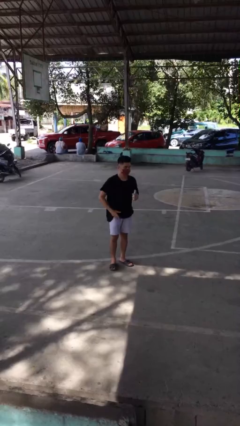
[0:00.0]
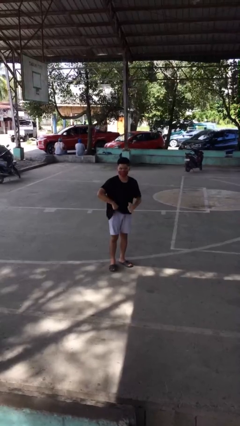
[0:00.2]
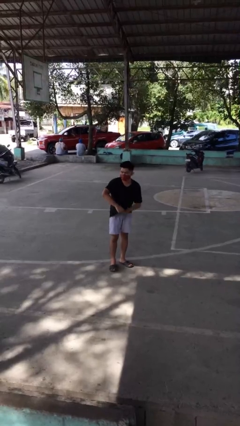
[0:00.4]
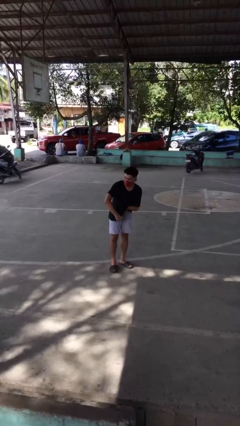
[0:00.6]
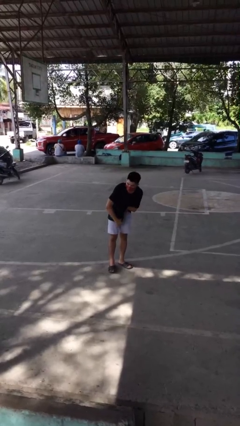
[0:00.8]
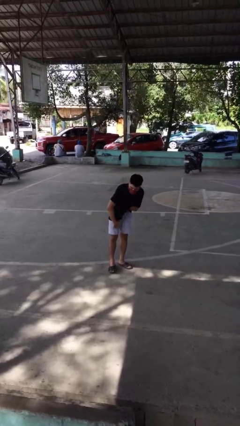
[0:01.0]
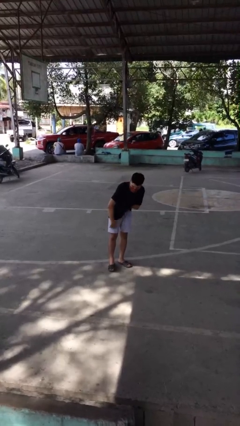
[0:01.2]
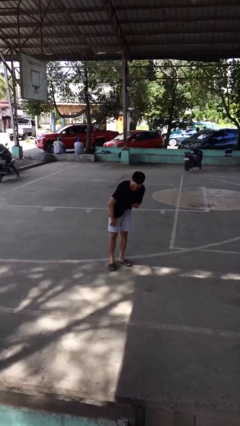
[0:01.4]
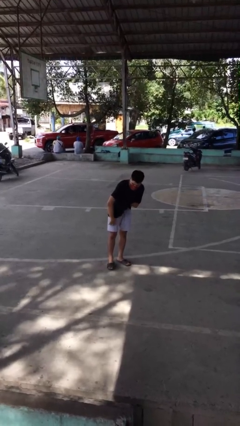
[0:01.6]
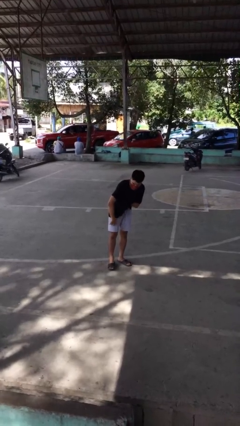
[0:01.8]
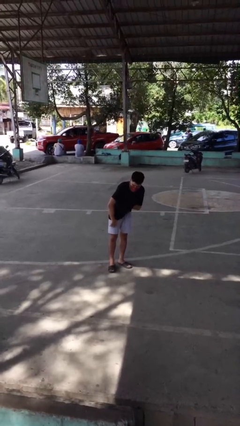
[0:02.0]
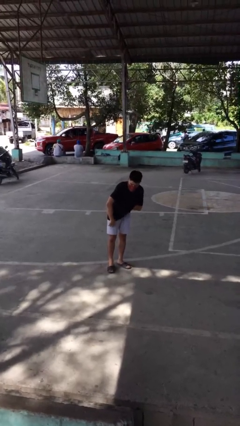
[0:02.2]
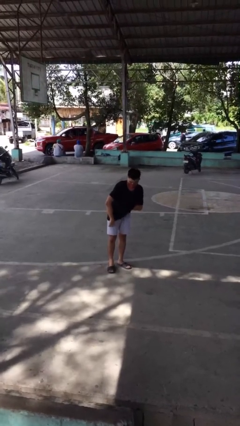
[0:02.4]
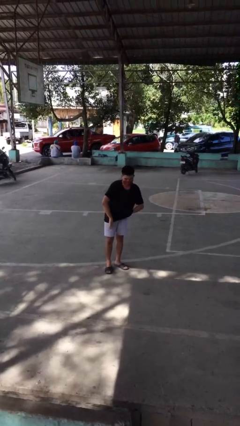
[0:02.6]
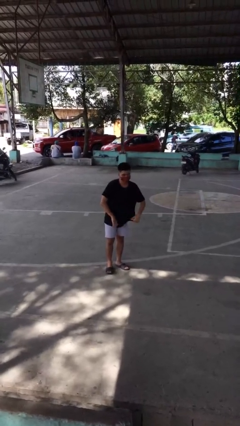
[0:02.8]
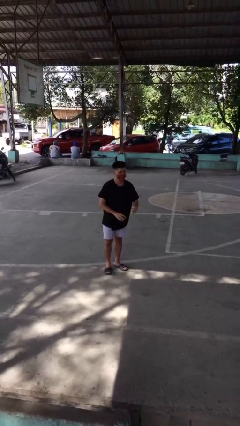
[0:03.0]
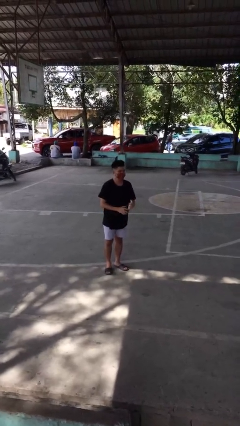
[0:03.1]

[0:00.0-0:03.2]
person applies deodorant

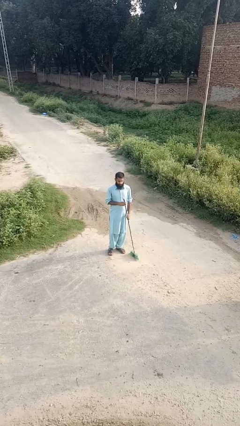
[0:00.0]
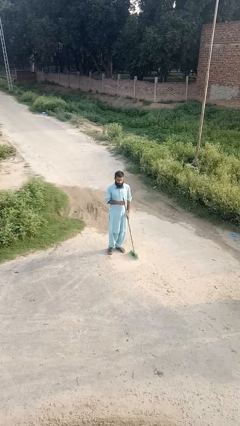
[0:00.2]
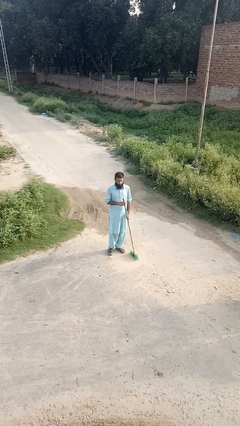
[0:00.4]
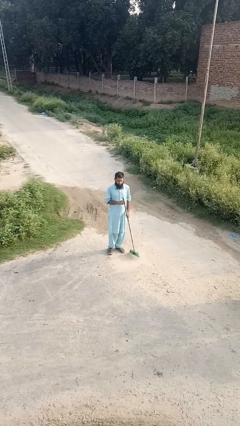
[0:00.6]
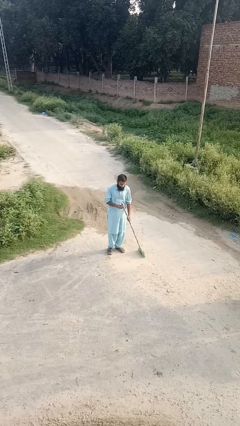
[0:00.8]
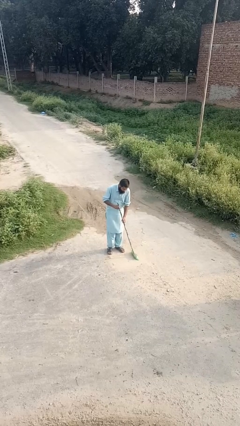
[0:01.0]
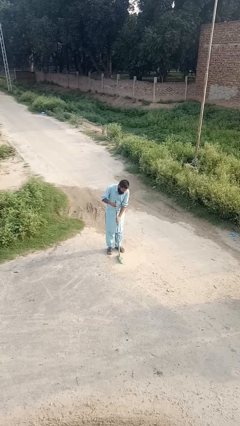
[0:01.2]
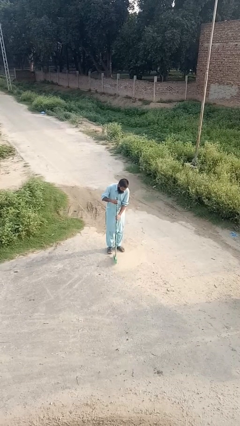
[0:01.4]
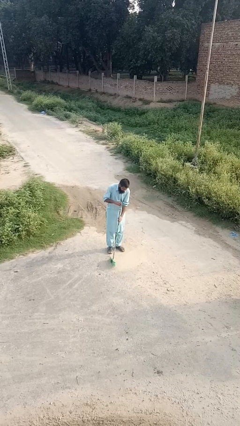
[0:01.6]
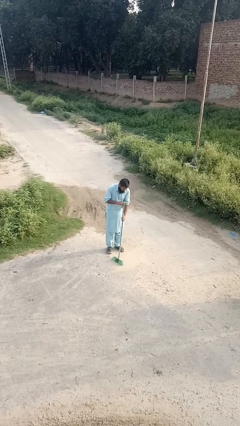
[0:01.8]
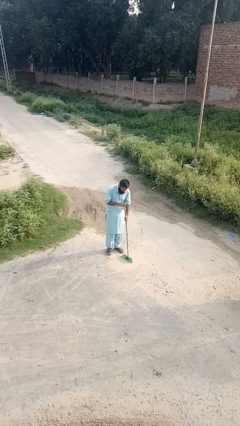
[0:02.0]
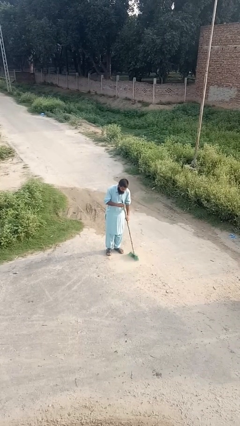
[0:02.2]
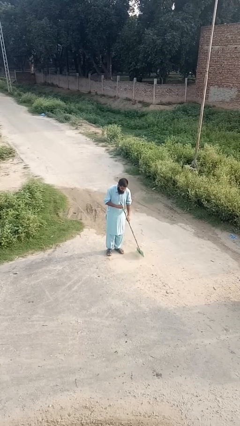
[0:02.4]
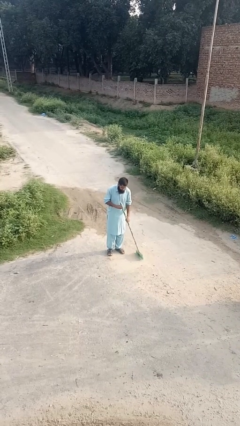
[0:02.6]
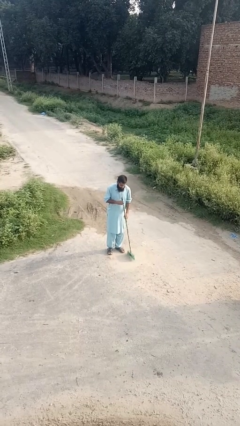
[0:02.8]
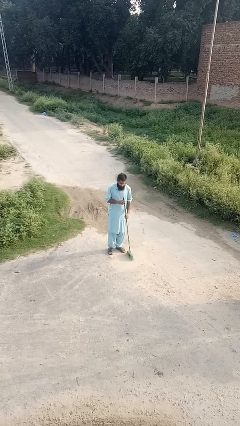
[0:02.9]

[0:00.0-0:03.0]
person sweeps floor

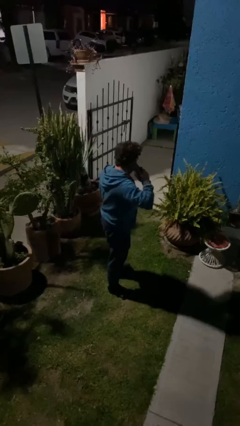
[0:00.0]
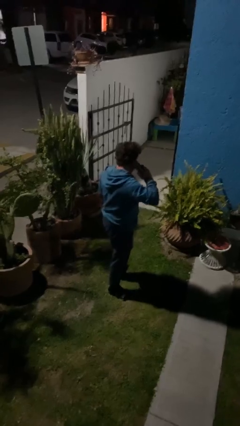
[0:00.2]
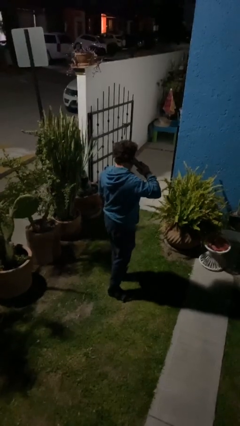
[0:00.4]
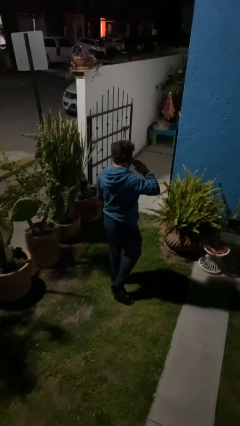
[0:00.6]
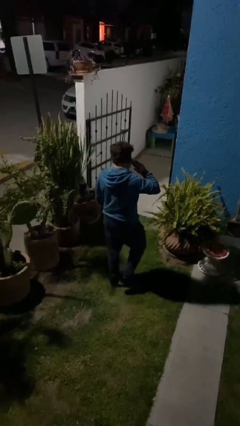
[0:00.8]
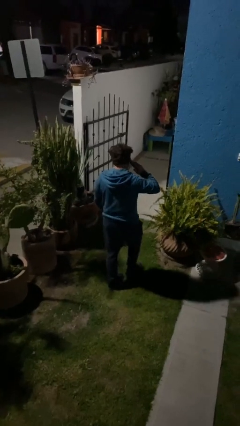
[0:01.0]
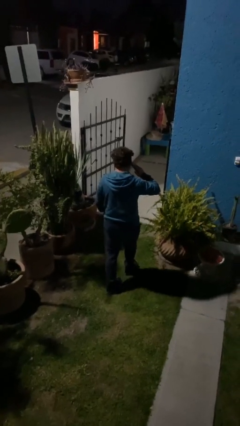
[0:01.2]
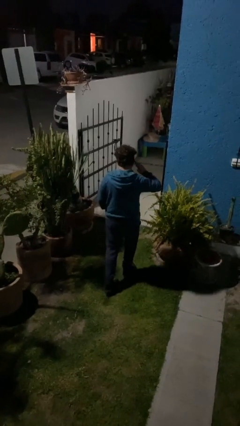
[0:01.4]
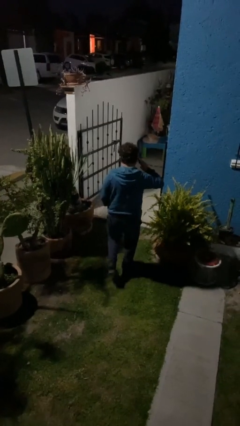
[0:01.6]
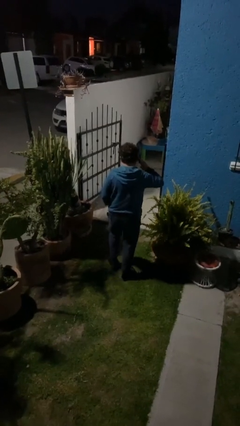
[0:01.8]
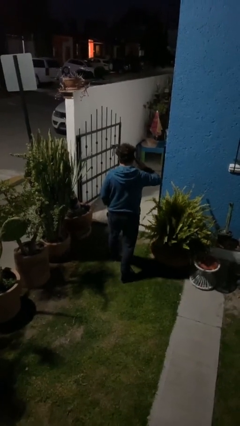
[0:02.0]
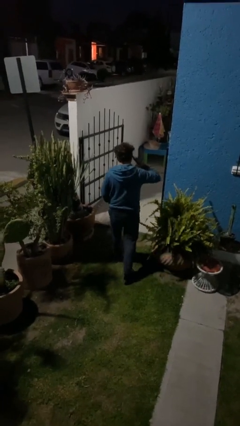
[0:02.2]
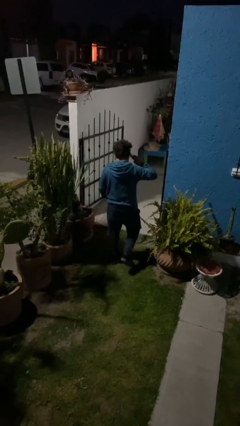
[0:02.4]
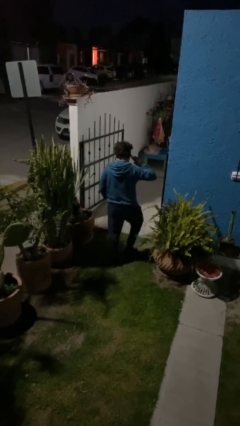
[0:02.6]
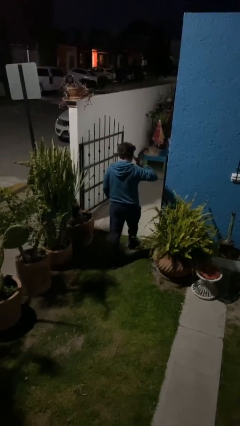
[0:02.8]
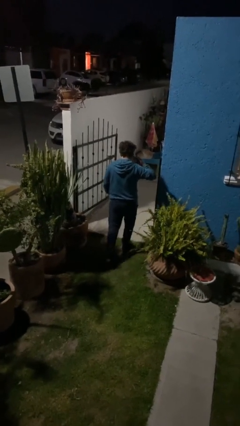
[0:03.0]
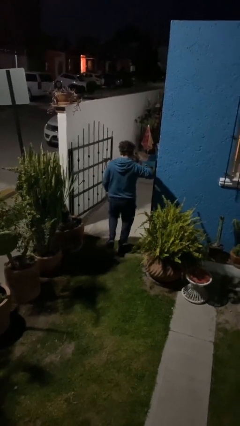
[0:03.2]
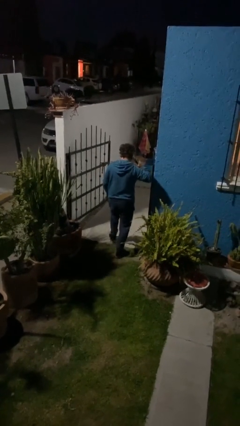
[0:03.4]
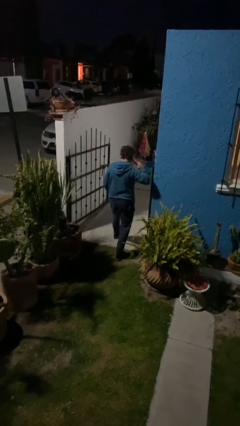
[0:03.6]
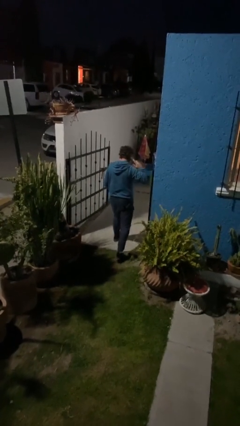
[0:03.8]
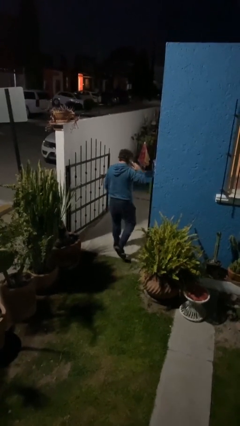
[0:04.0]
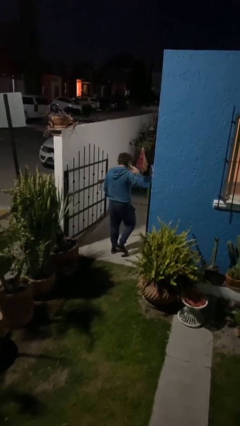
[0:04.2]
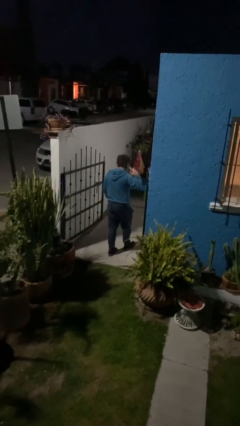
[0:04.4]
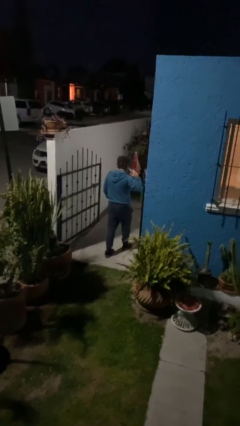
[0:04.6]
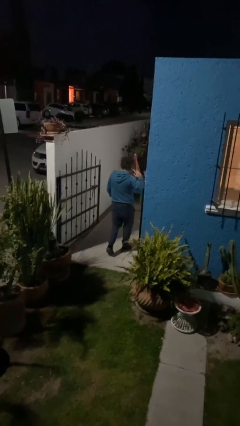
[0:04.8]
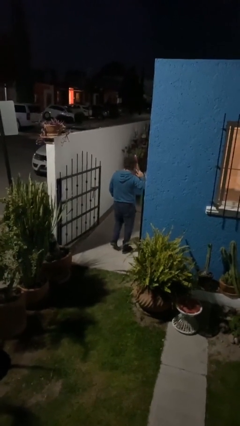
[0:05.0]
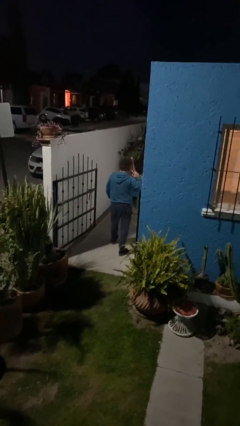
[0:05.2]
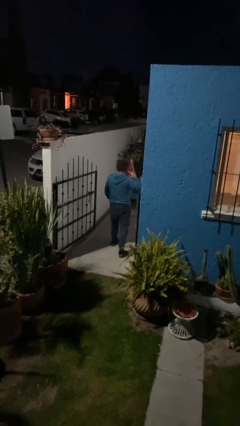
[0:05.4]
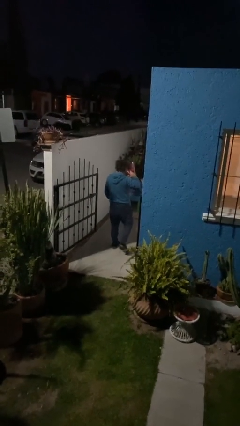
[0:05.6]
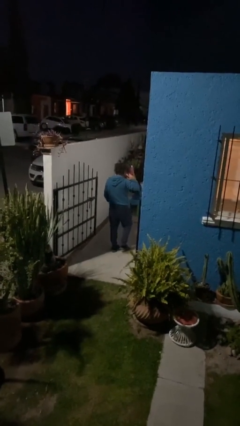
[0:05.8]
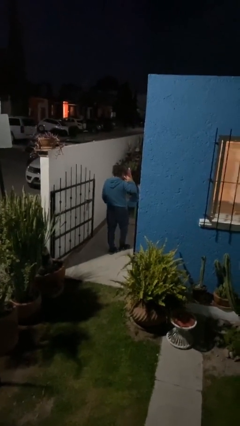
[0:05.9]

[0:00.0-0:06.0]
person exits scene through structure

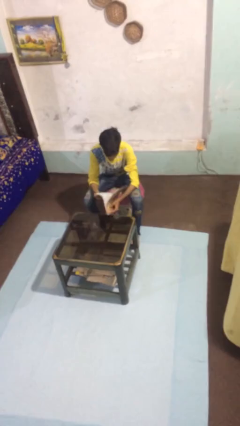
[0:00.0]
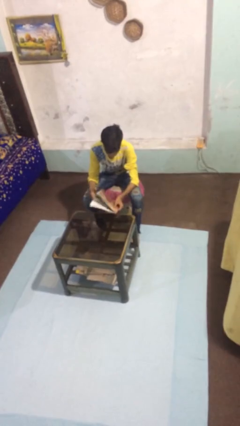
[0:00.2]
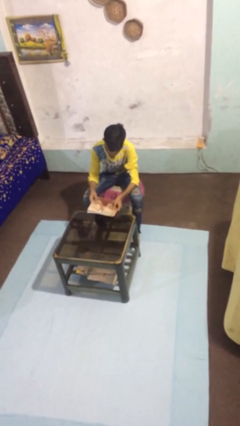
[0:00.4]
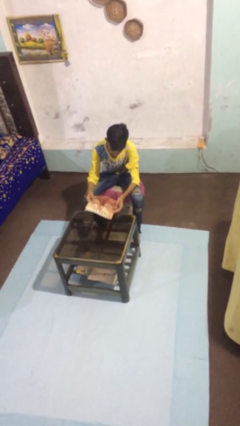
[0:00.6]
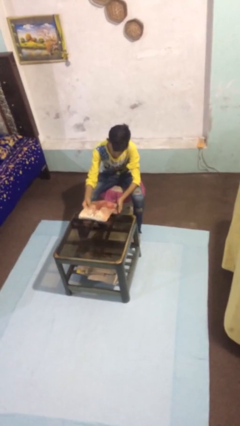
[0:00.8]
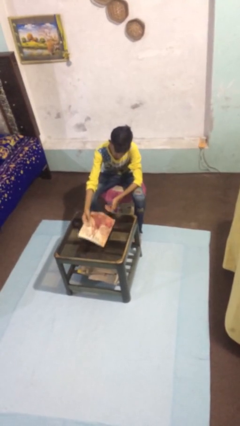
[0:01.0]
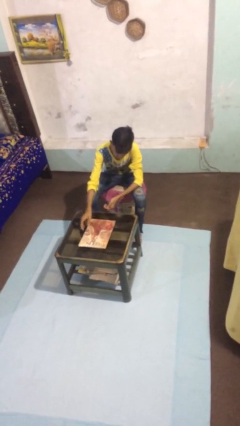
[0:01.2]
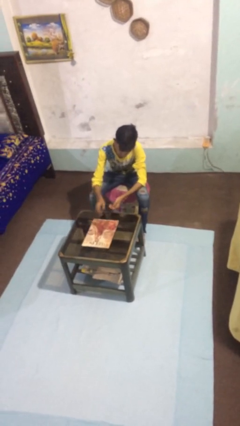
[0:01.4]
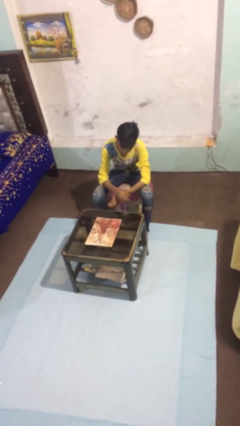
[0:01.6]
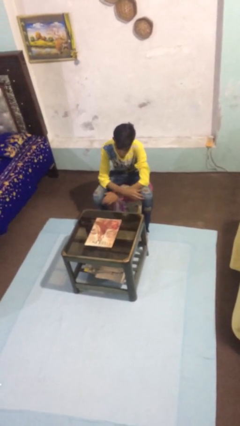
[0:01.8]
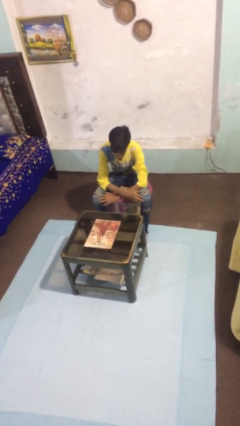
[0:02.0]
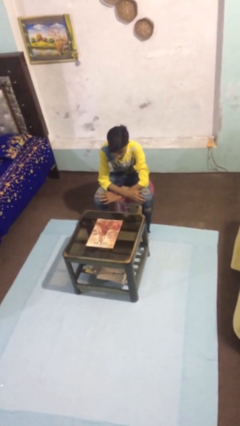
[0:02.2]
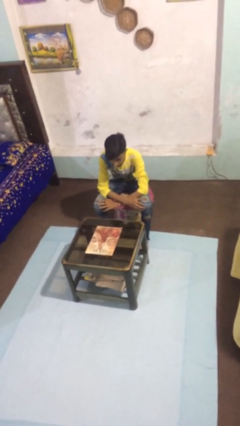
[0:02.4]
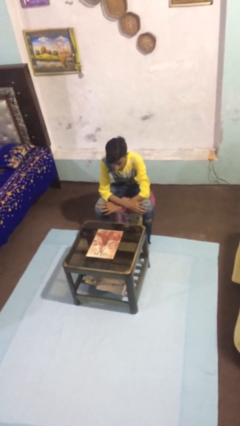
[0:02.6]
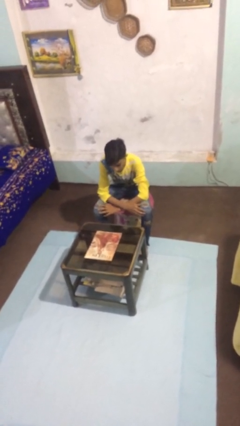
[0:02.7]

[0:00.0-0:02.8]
person puts down object on table

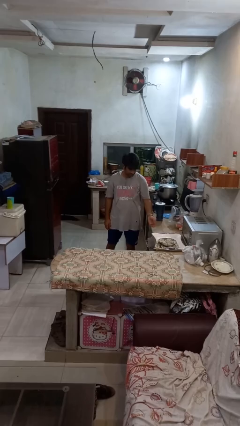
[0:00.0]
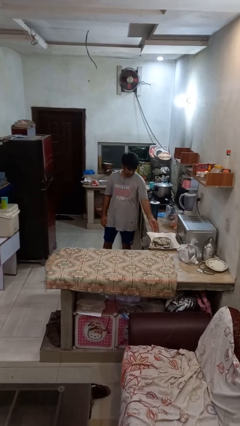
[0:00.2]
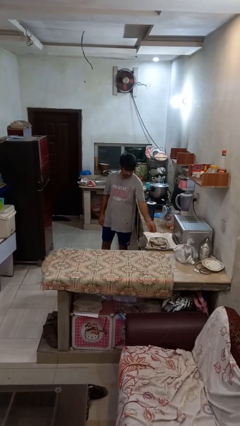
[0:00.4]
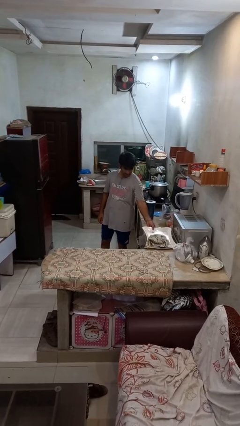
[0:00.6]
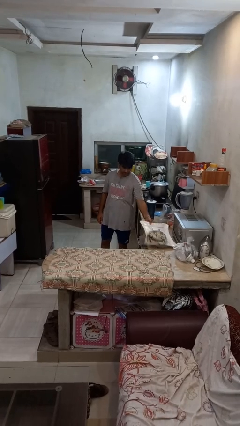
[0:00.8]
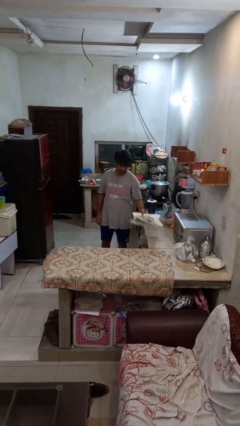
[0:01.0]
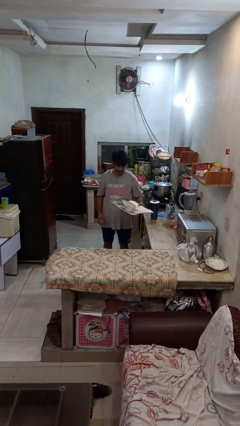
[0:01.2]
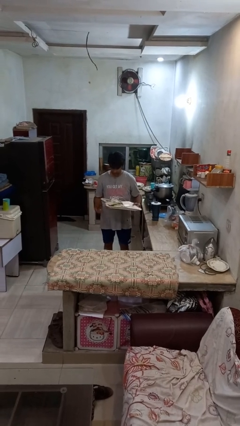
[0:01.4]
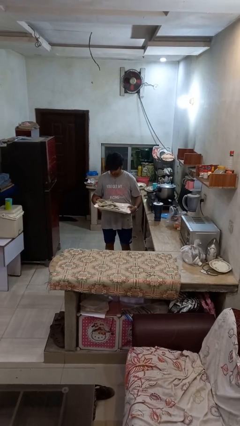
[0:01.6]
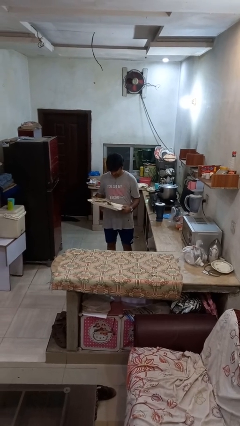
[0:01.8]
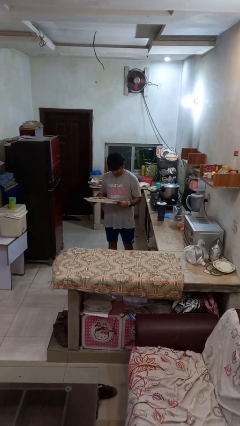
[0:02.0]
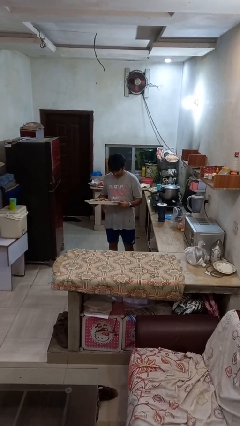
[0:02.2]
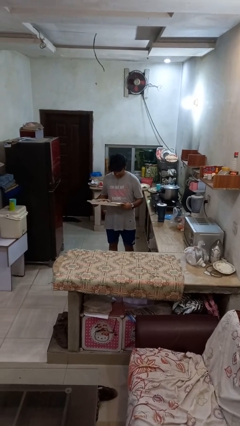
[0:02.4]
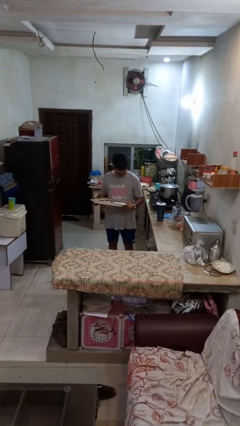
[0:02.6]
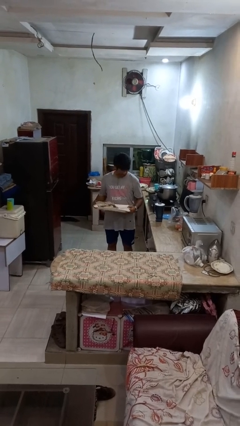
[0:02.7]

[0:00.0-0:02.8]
person picks up object from countertop

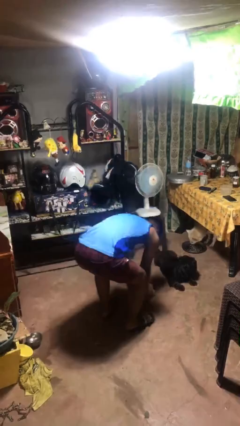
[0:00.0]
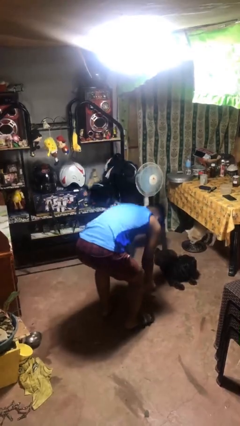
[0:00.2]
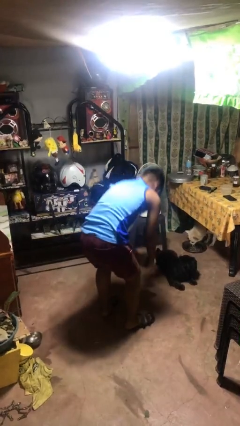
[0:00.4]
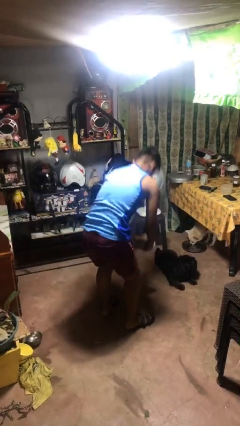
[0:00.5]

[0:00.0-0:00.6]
person catches dropped object
